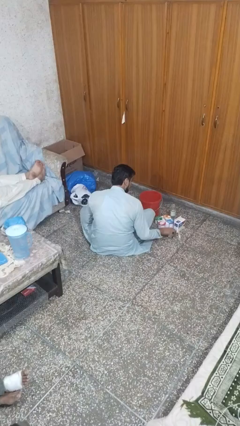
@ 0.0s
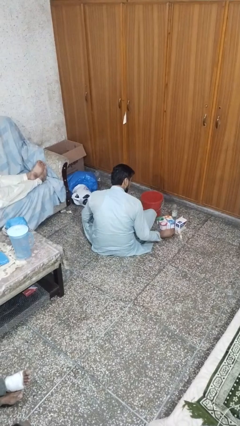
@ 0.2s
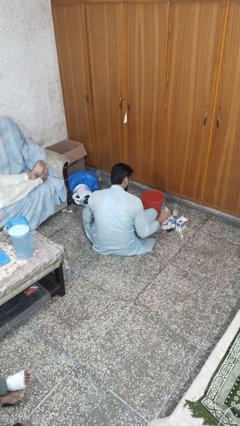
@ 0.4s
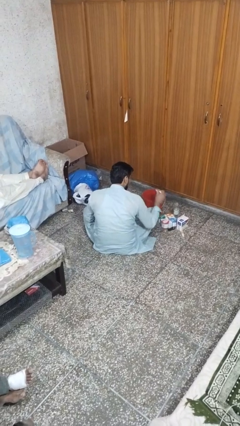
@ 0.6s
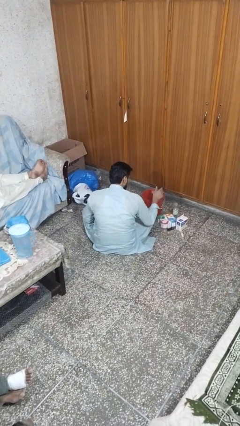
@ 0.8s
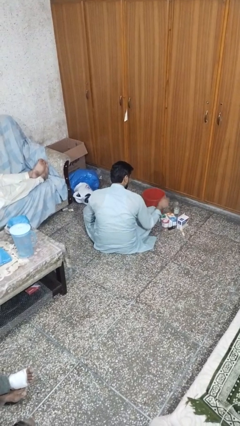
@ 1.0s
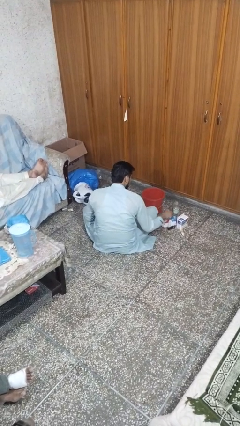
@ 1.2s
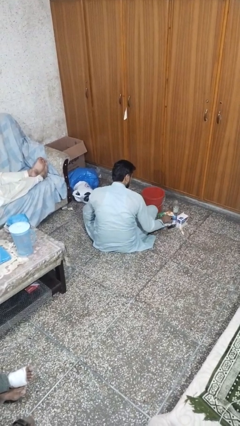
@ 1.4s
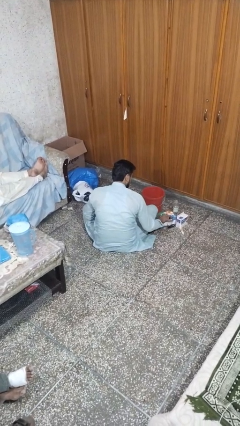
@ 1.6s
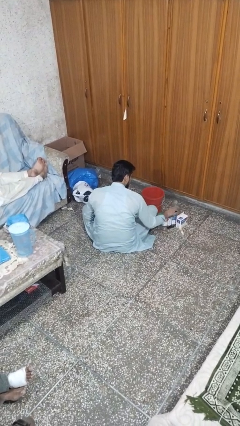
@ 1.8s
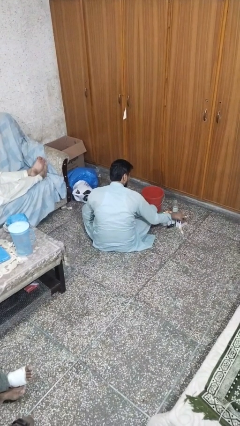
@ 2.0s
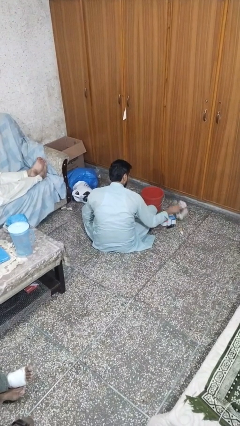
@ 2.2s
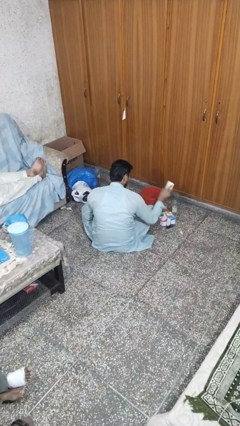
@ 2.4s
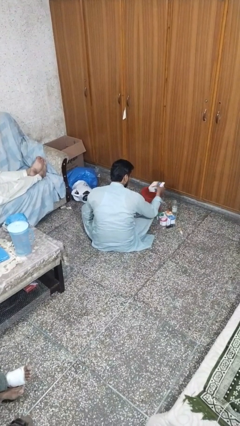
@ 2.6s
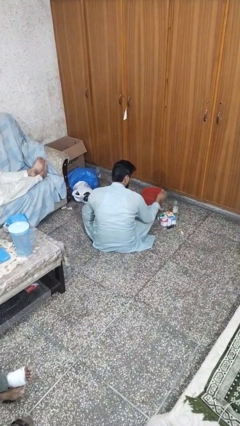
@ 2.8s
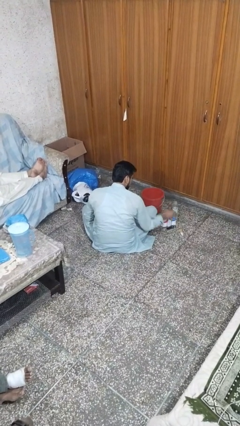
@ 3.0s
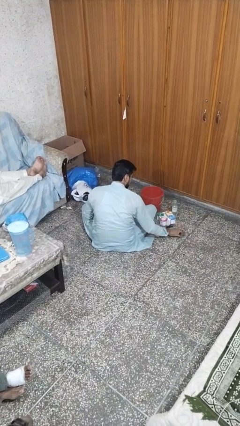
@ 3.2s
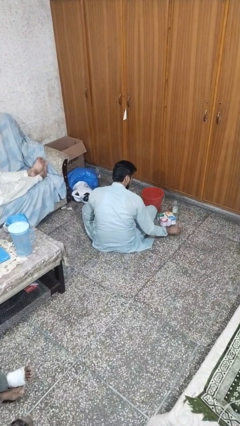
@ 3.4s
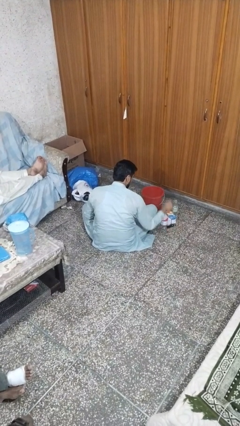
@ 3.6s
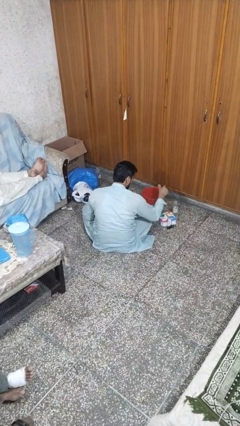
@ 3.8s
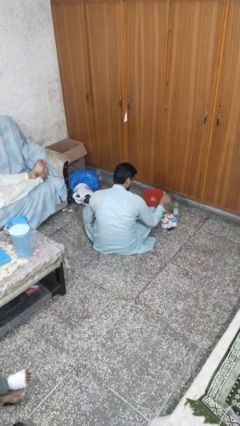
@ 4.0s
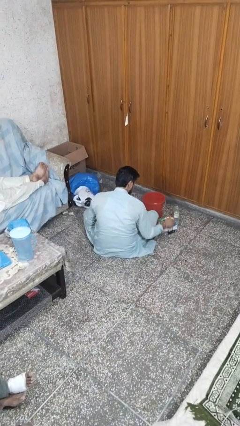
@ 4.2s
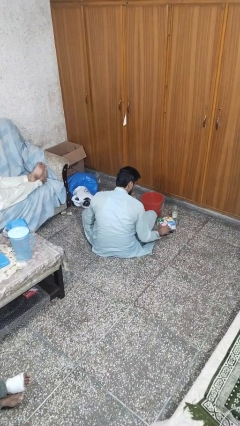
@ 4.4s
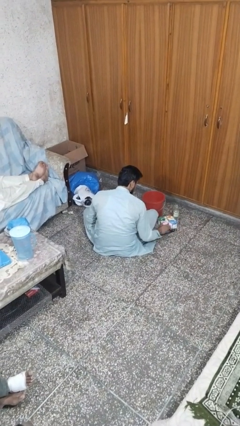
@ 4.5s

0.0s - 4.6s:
person puts object into basket

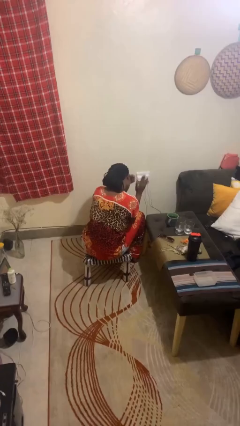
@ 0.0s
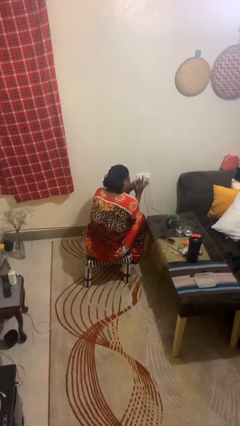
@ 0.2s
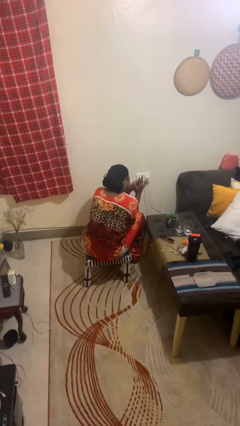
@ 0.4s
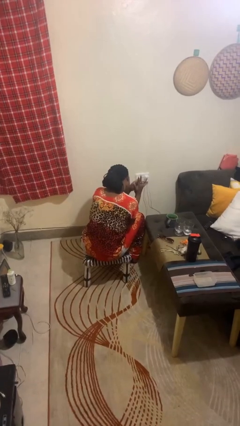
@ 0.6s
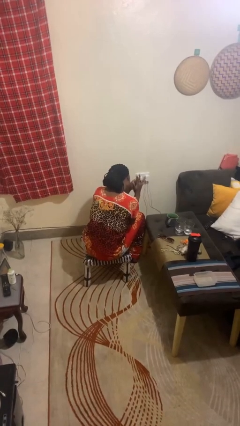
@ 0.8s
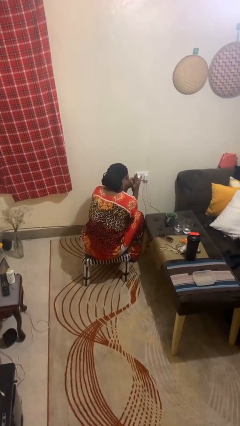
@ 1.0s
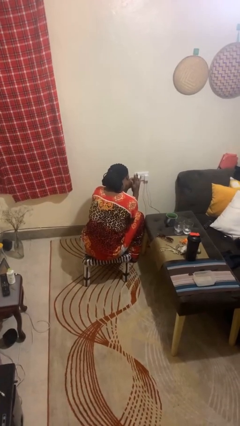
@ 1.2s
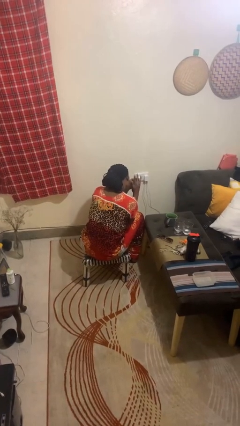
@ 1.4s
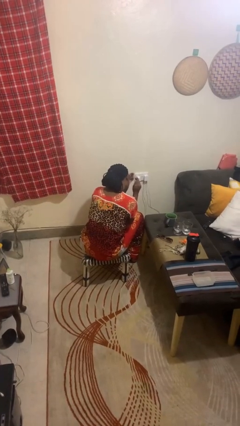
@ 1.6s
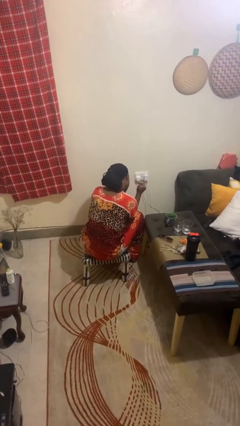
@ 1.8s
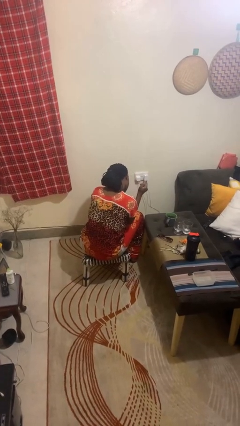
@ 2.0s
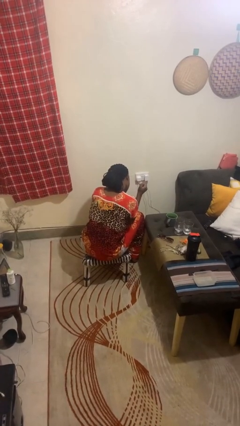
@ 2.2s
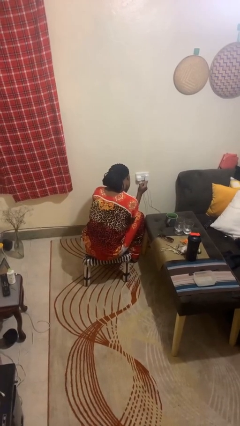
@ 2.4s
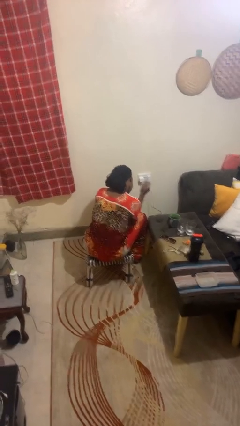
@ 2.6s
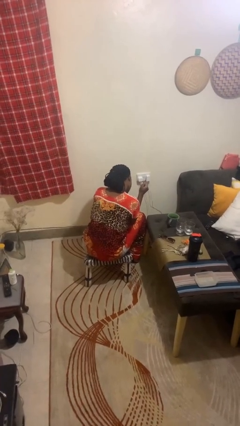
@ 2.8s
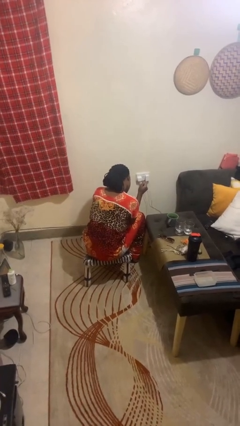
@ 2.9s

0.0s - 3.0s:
person takes off ring

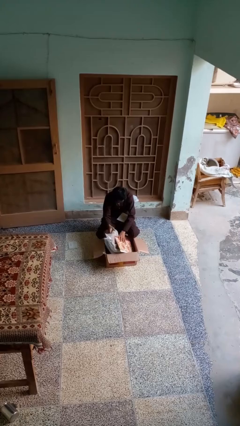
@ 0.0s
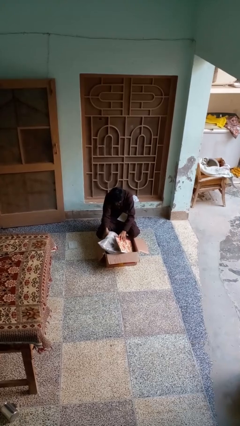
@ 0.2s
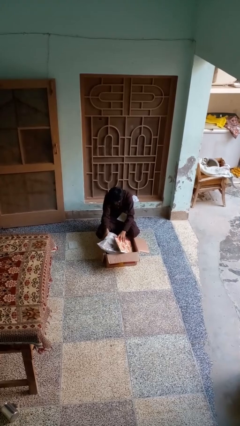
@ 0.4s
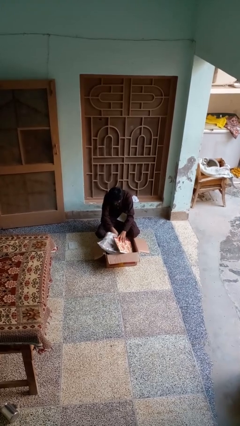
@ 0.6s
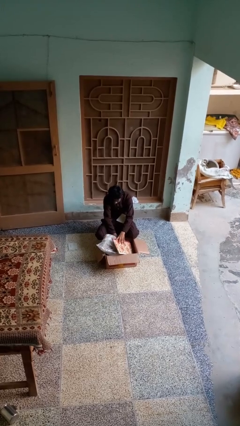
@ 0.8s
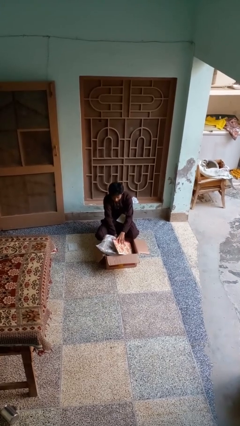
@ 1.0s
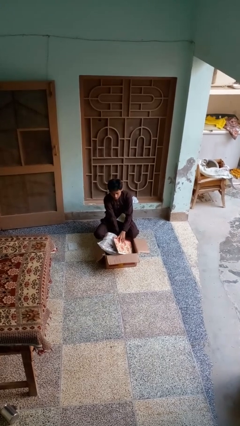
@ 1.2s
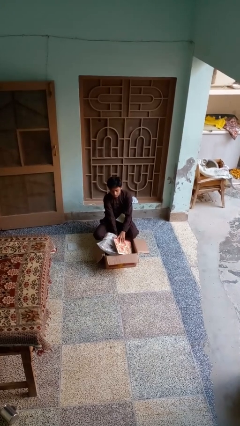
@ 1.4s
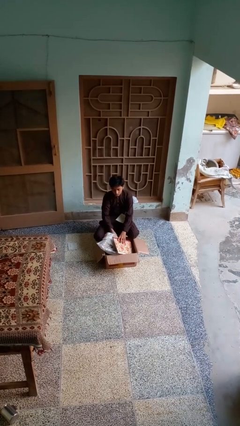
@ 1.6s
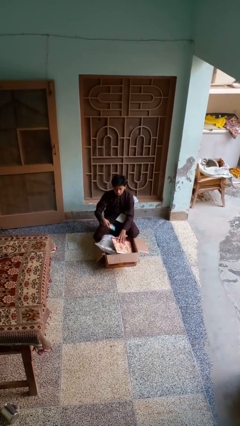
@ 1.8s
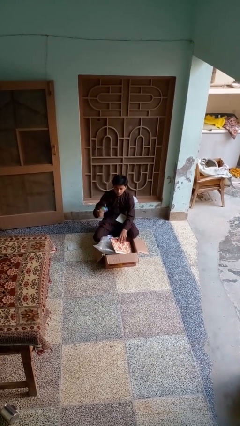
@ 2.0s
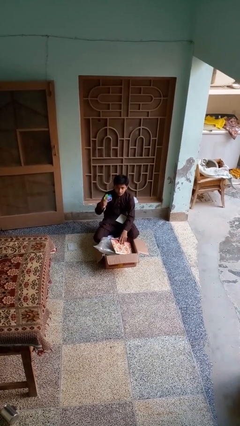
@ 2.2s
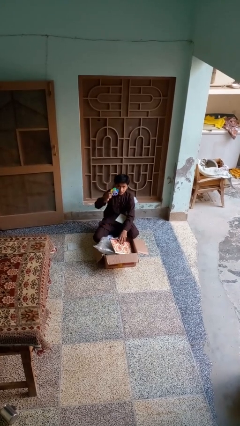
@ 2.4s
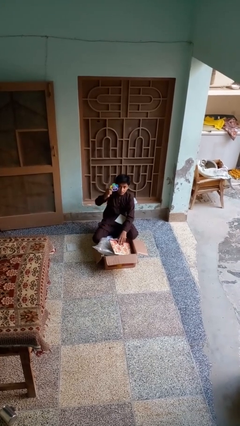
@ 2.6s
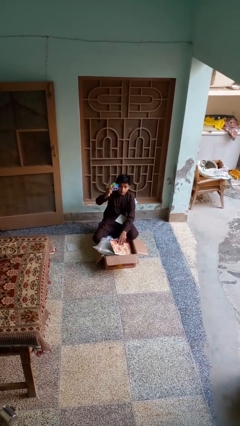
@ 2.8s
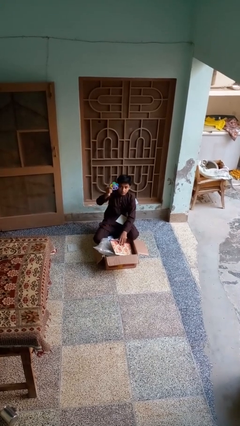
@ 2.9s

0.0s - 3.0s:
person takes object from box

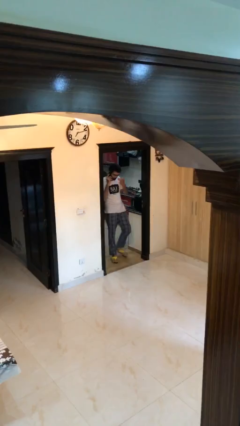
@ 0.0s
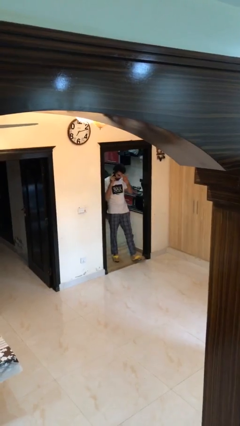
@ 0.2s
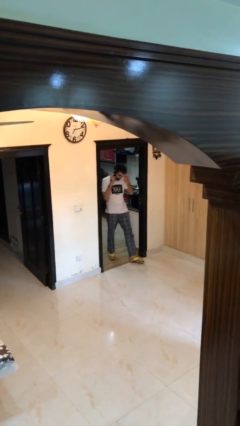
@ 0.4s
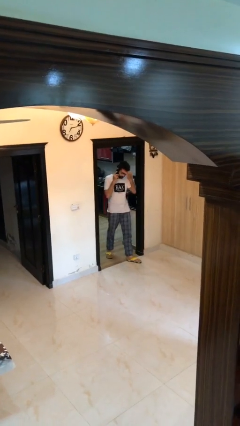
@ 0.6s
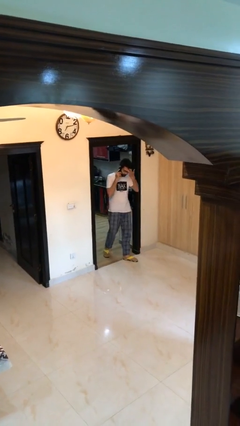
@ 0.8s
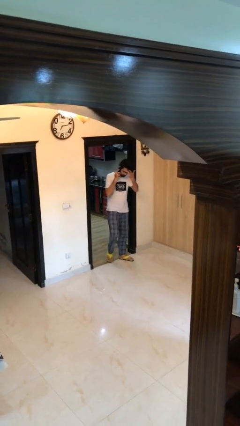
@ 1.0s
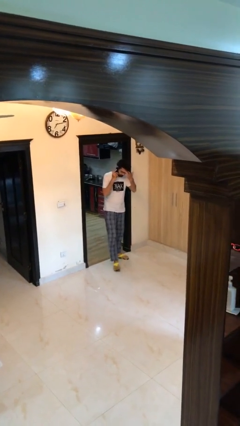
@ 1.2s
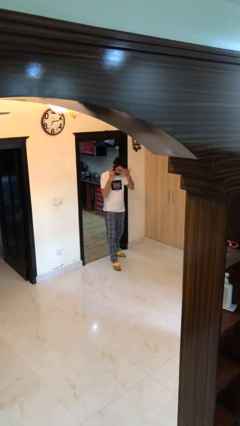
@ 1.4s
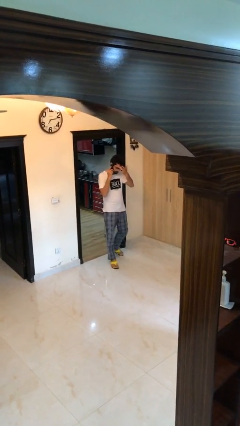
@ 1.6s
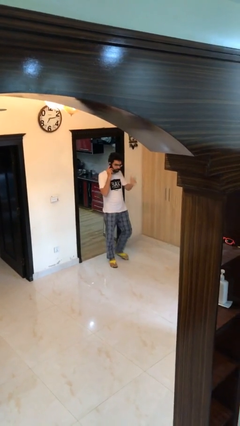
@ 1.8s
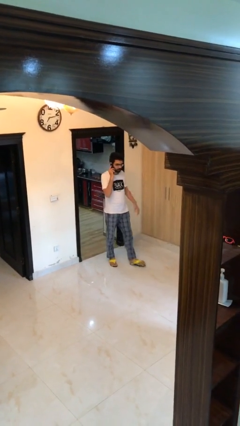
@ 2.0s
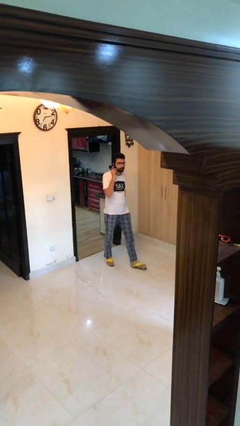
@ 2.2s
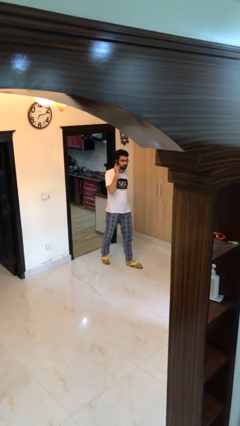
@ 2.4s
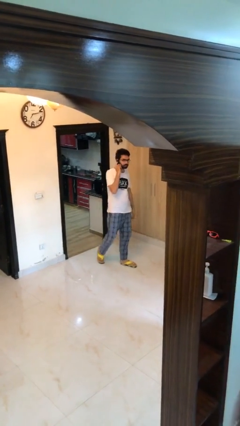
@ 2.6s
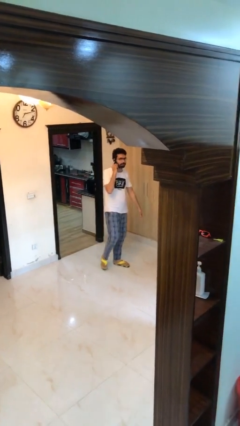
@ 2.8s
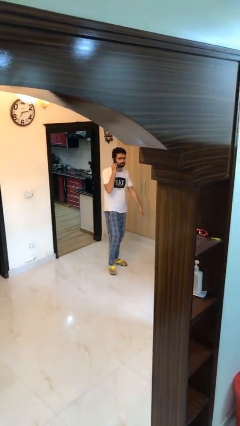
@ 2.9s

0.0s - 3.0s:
person enters scene through structure

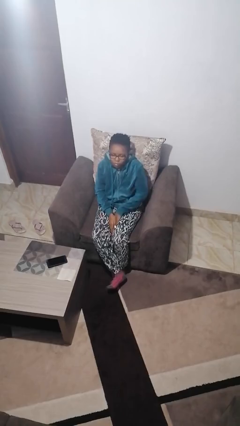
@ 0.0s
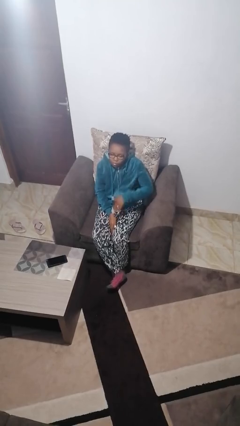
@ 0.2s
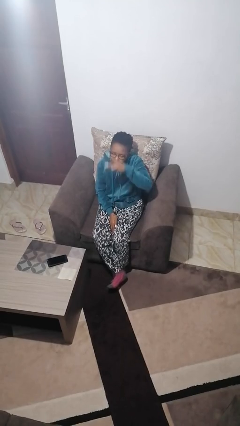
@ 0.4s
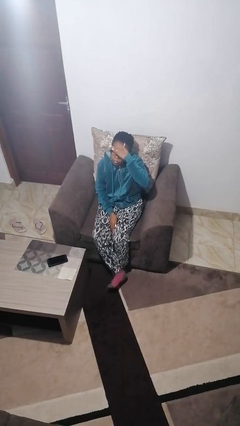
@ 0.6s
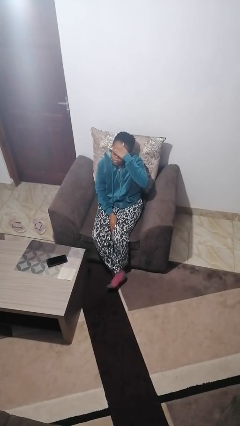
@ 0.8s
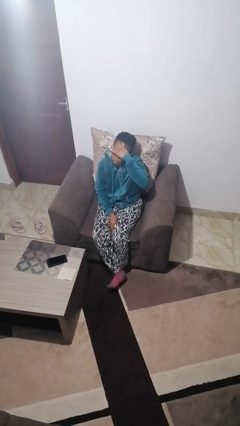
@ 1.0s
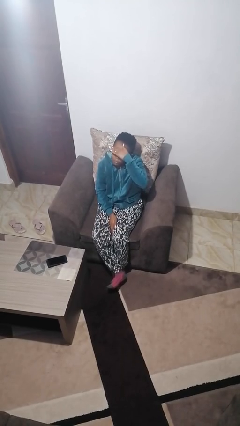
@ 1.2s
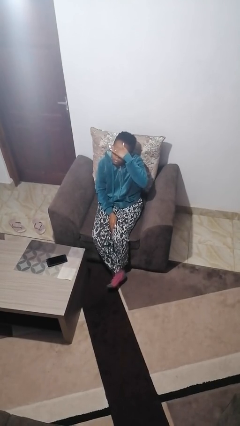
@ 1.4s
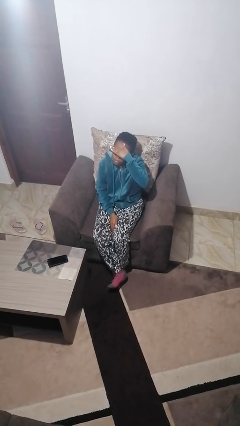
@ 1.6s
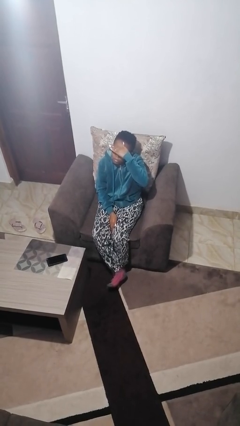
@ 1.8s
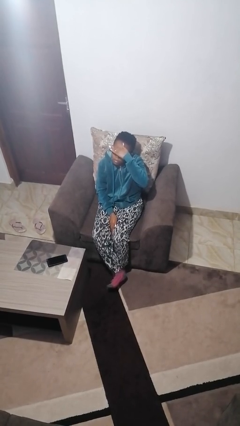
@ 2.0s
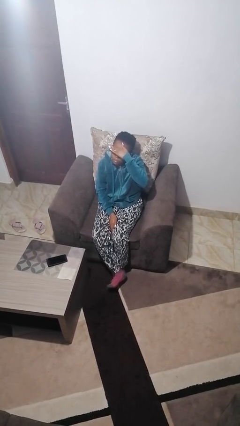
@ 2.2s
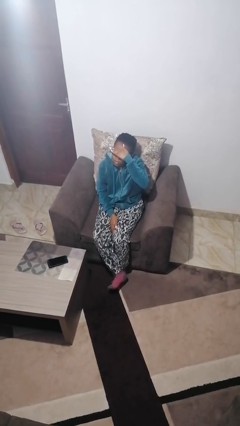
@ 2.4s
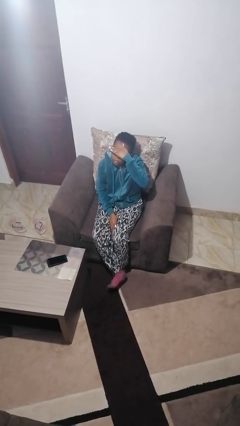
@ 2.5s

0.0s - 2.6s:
person shades eyes

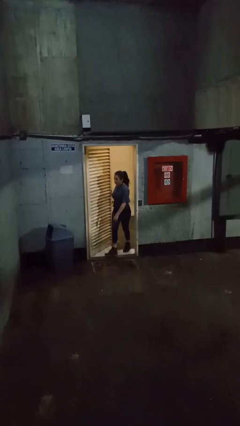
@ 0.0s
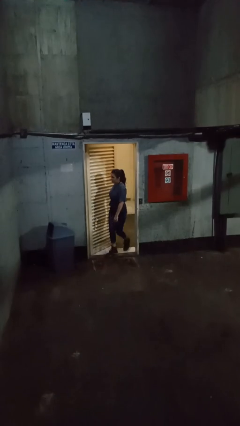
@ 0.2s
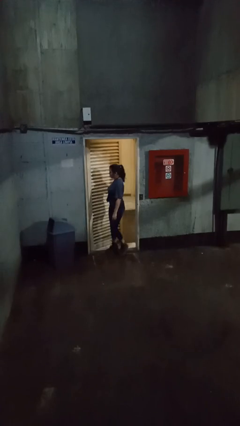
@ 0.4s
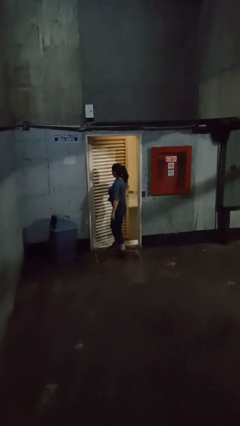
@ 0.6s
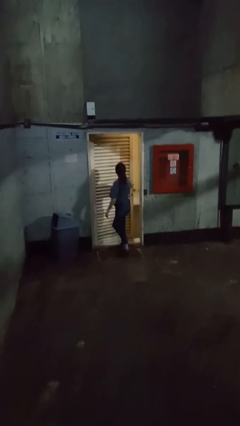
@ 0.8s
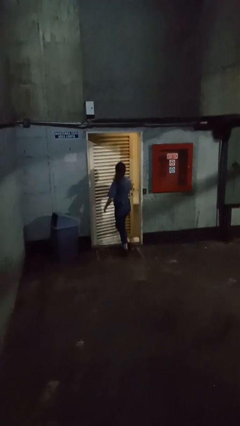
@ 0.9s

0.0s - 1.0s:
person closes facility door

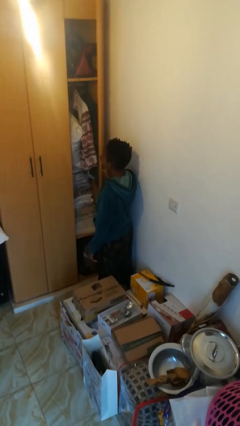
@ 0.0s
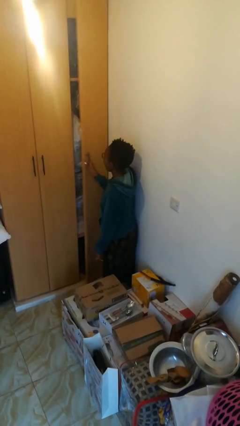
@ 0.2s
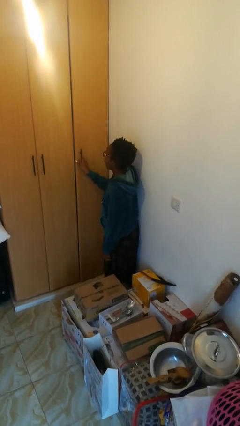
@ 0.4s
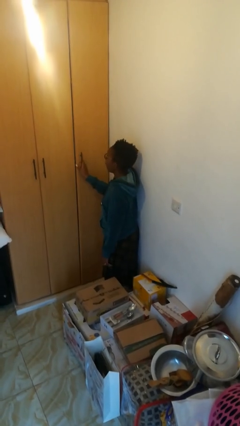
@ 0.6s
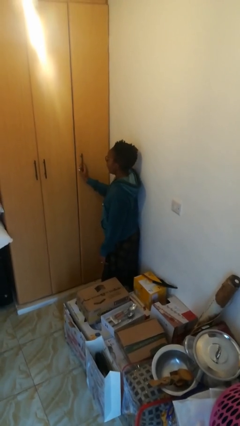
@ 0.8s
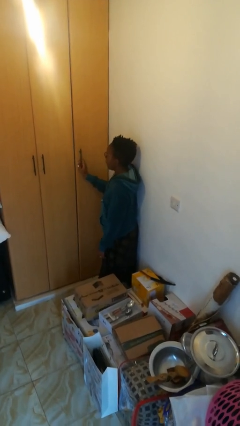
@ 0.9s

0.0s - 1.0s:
person closes closet door
